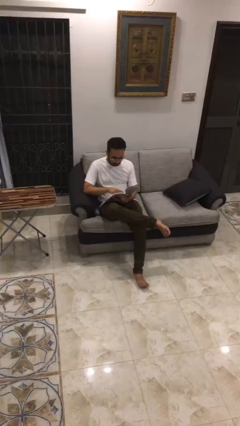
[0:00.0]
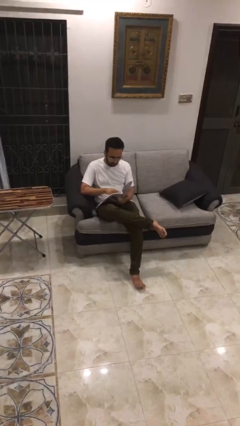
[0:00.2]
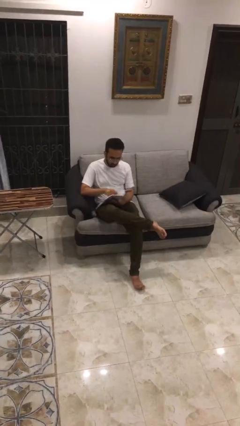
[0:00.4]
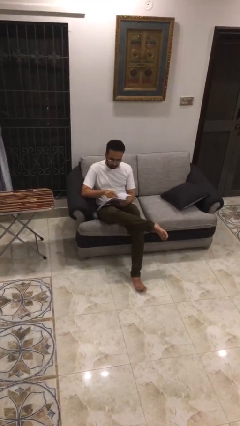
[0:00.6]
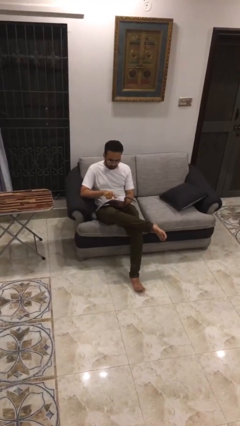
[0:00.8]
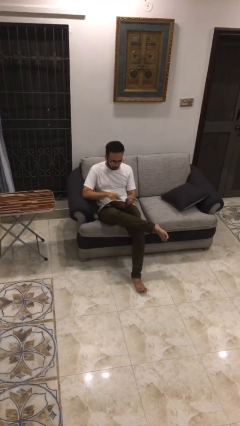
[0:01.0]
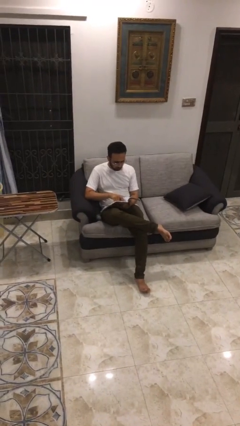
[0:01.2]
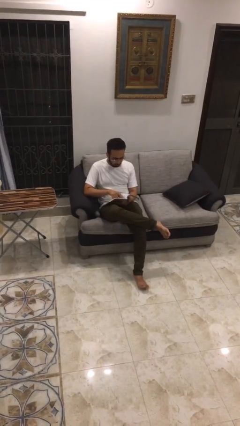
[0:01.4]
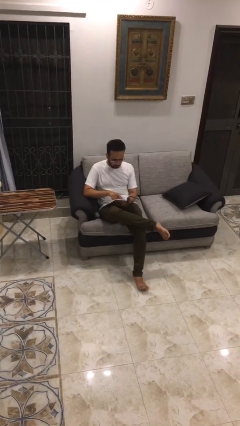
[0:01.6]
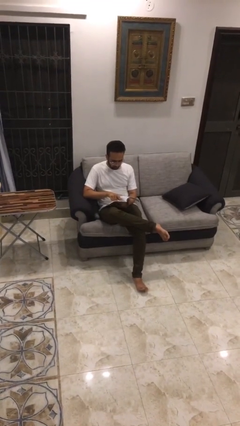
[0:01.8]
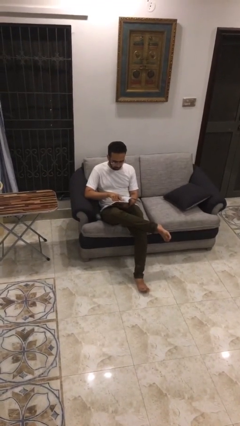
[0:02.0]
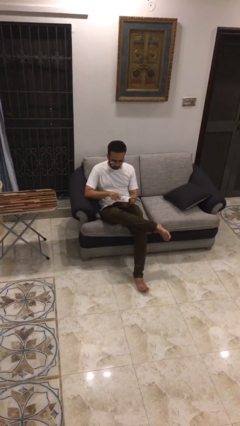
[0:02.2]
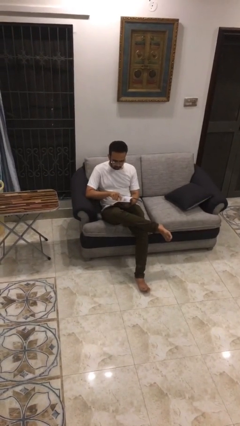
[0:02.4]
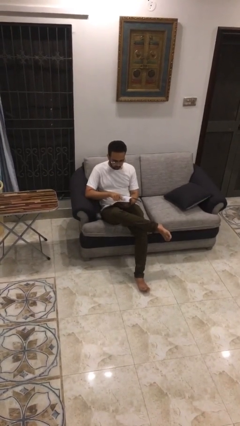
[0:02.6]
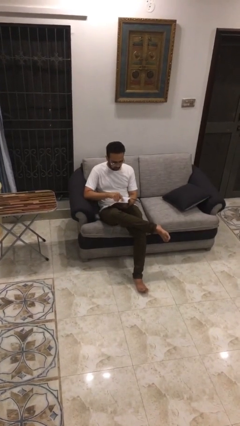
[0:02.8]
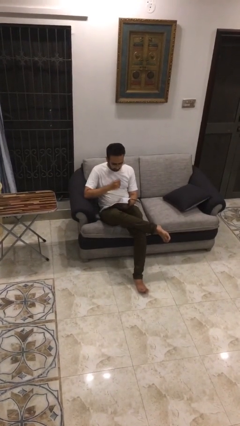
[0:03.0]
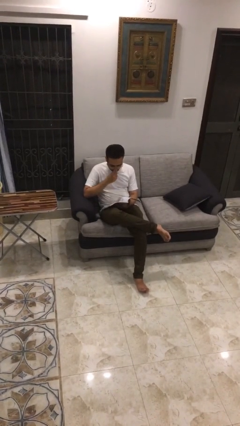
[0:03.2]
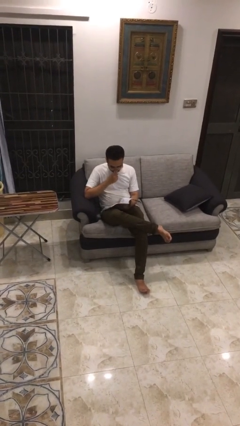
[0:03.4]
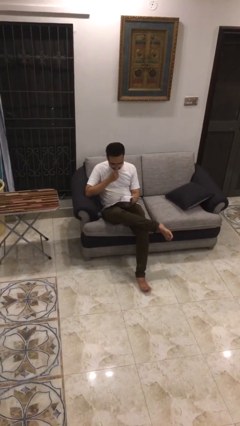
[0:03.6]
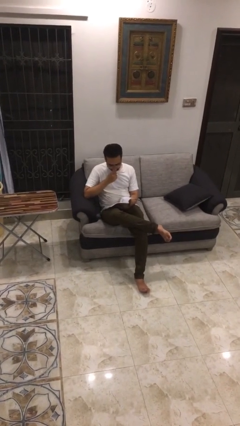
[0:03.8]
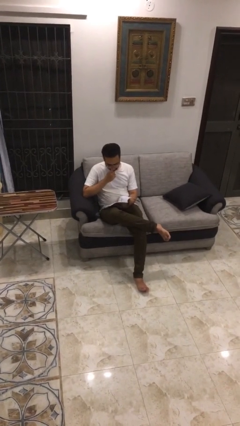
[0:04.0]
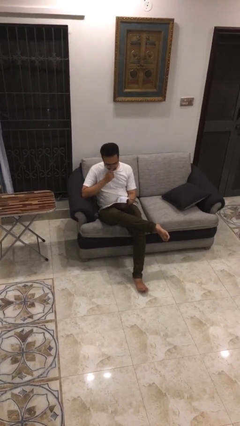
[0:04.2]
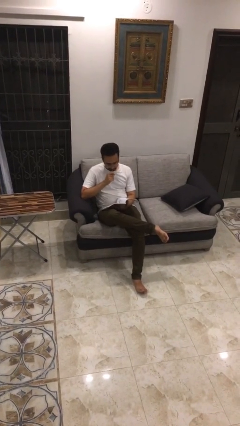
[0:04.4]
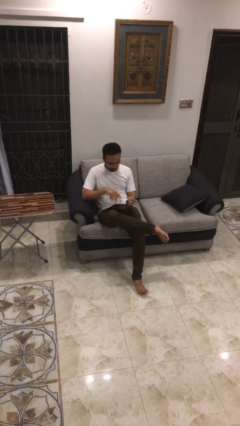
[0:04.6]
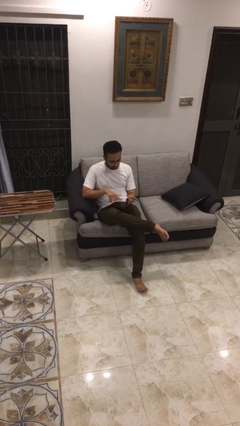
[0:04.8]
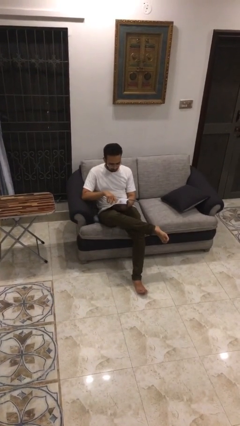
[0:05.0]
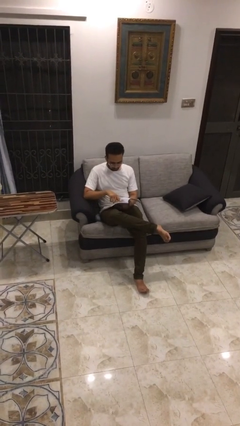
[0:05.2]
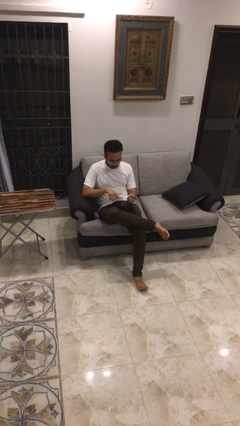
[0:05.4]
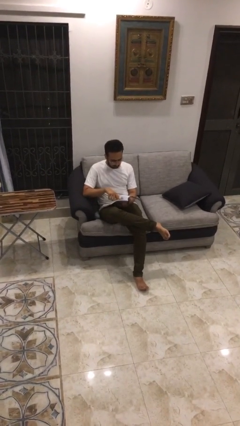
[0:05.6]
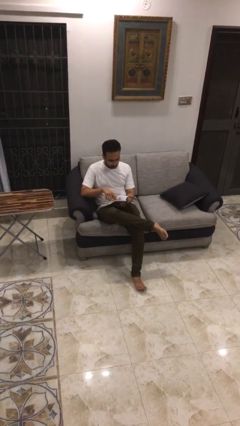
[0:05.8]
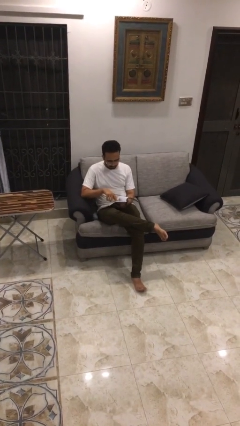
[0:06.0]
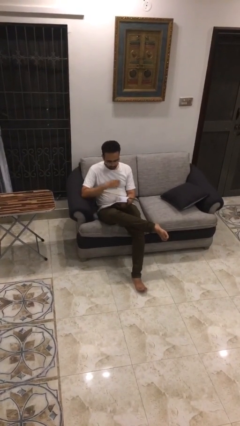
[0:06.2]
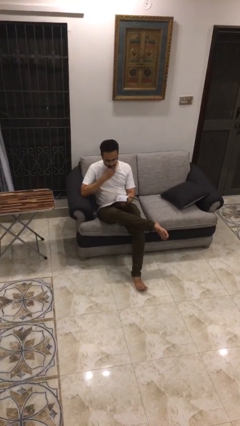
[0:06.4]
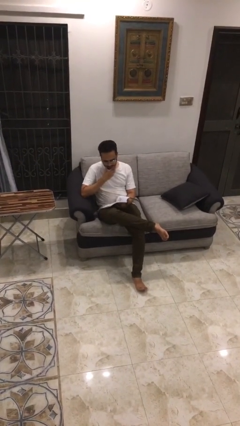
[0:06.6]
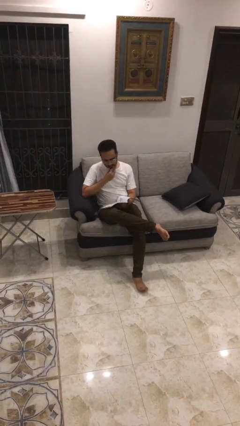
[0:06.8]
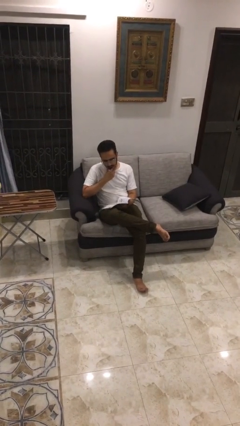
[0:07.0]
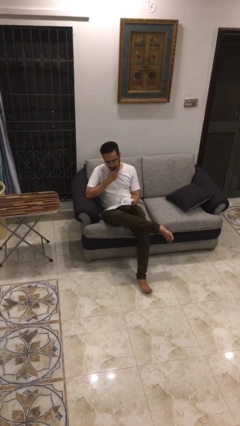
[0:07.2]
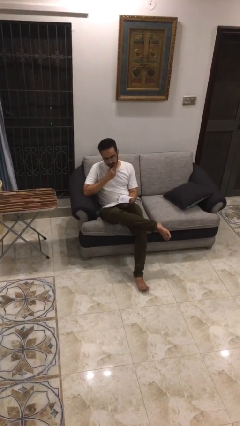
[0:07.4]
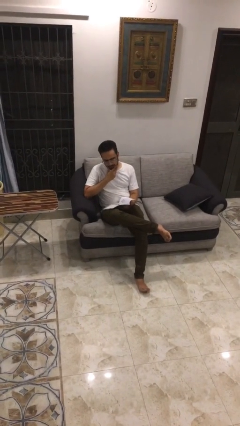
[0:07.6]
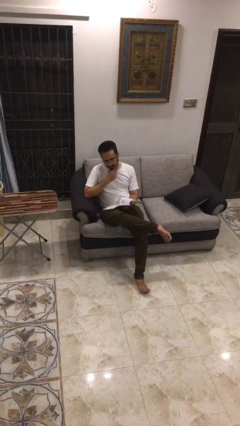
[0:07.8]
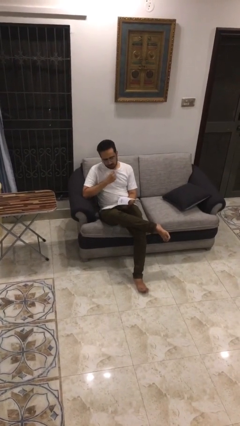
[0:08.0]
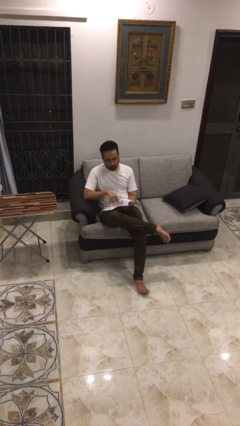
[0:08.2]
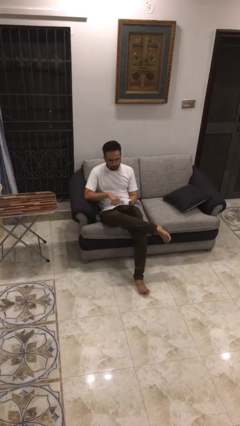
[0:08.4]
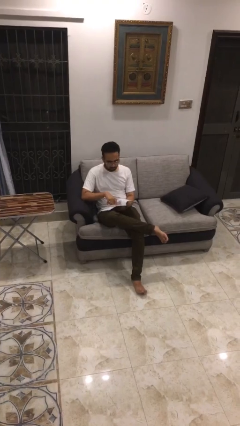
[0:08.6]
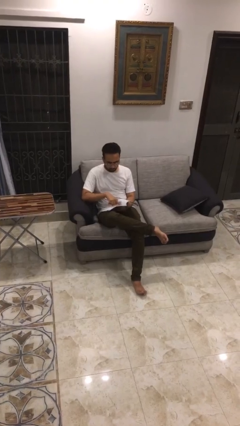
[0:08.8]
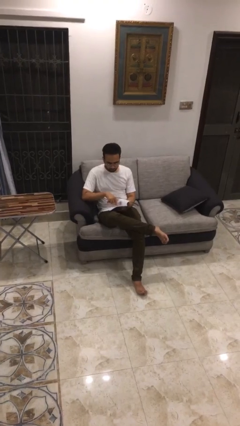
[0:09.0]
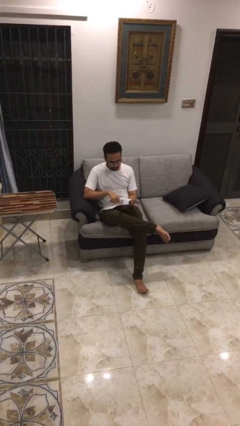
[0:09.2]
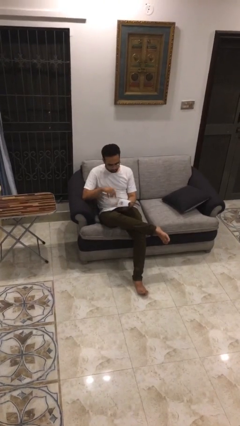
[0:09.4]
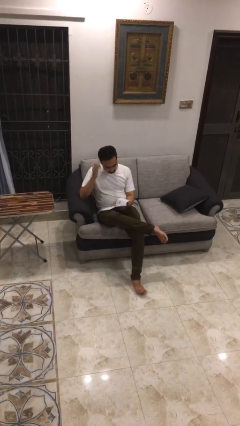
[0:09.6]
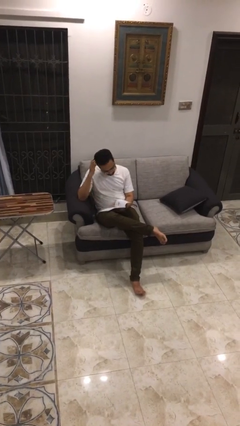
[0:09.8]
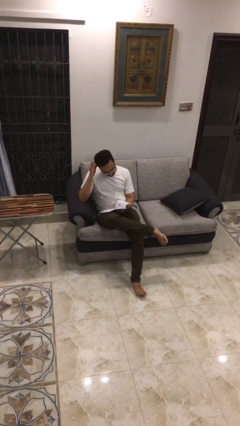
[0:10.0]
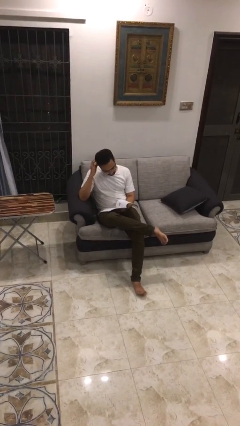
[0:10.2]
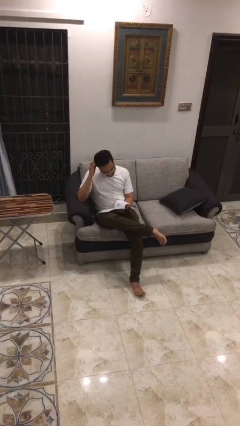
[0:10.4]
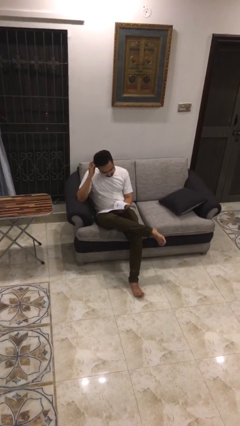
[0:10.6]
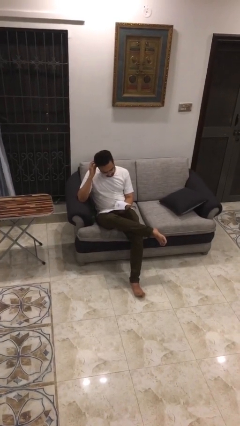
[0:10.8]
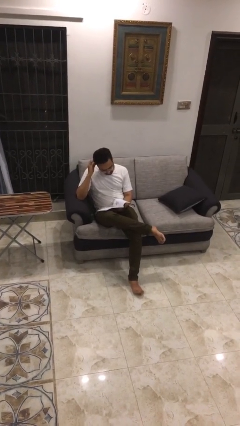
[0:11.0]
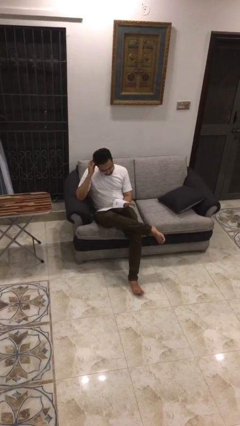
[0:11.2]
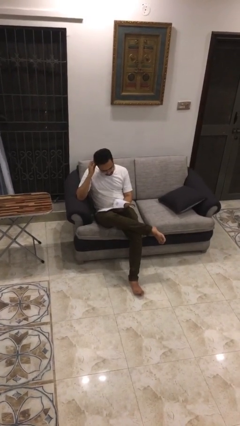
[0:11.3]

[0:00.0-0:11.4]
person reads document

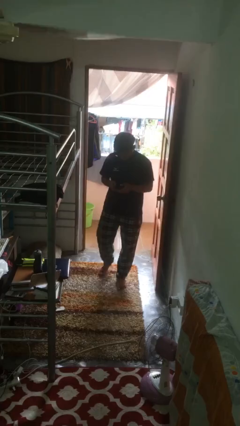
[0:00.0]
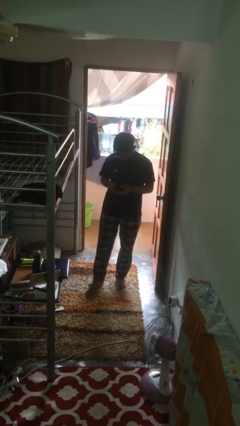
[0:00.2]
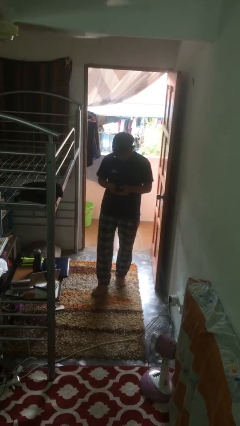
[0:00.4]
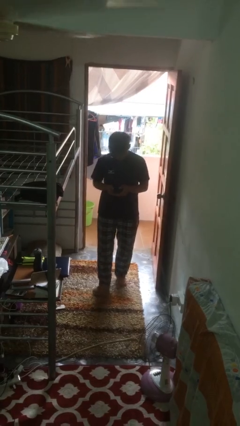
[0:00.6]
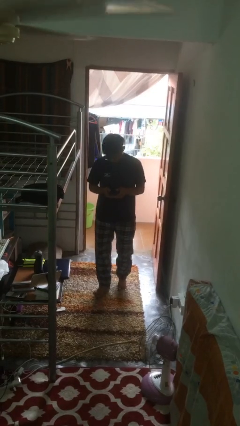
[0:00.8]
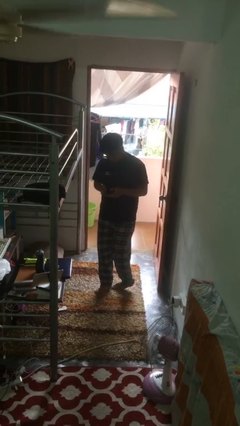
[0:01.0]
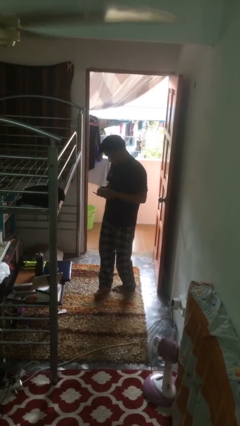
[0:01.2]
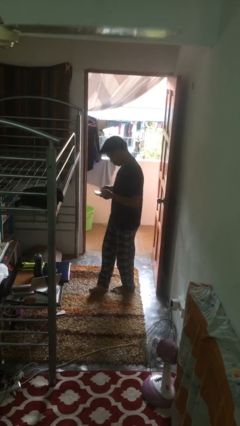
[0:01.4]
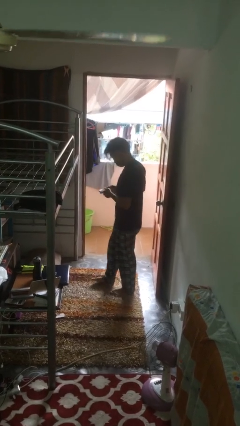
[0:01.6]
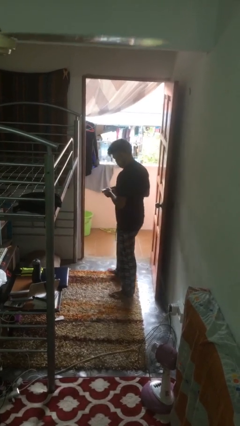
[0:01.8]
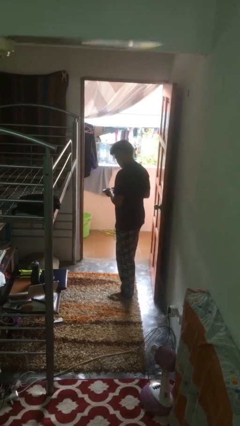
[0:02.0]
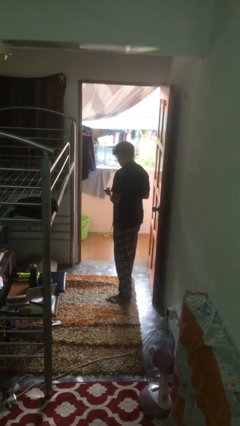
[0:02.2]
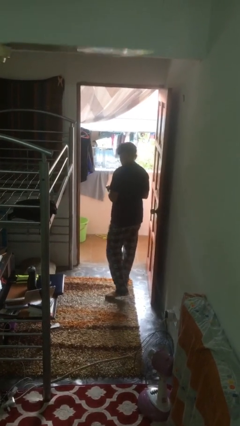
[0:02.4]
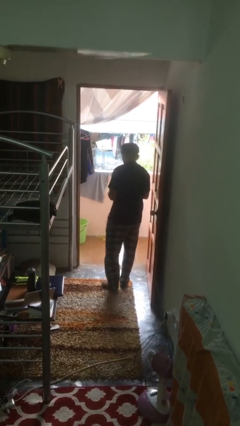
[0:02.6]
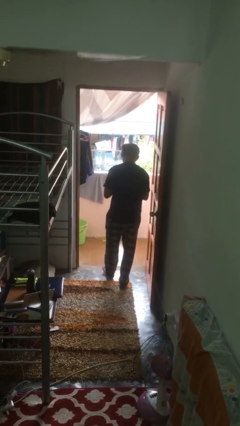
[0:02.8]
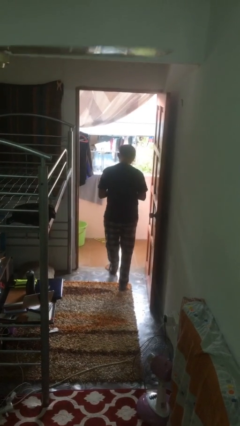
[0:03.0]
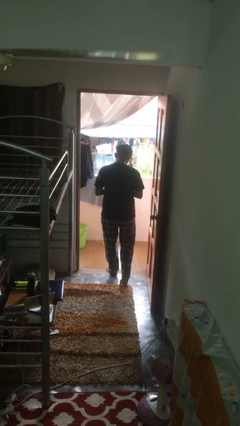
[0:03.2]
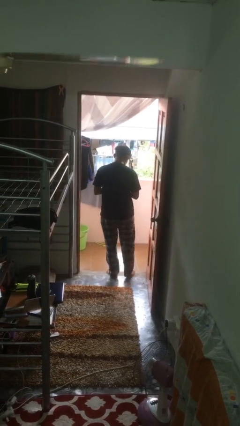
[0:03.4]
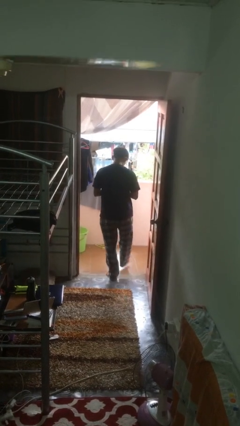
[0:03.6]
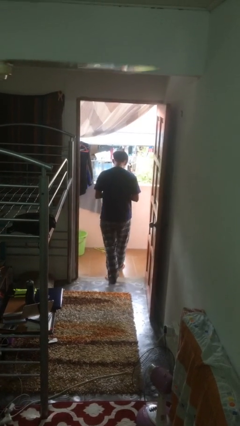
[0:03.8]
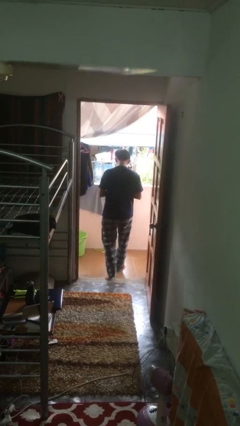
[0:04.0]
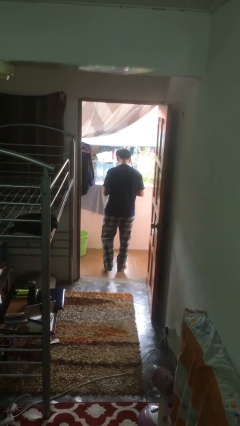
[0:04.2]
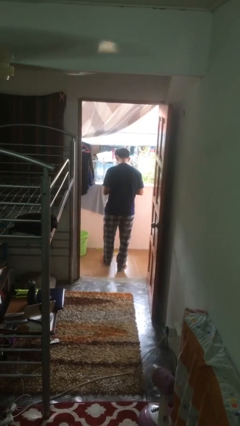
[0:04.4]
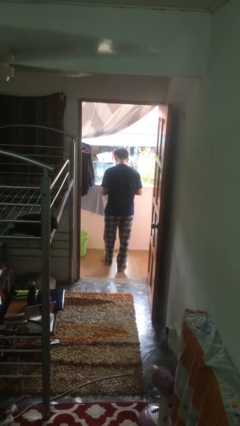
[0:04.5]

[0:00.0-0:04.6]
person exits scene through structure

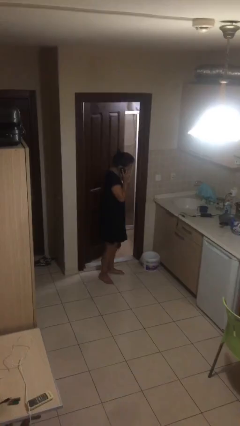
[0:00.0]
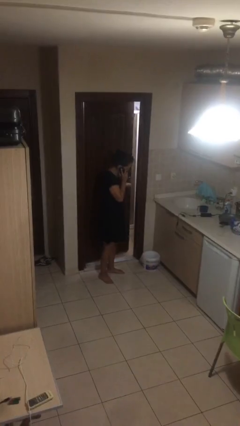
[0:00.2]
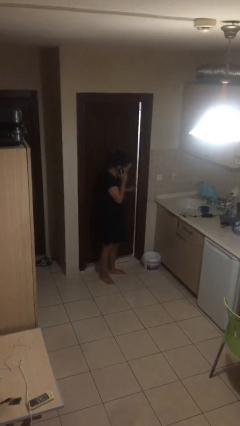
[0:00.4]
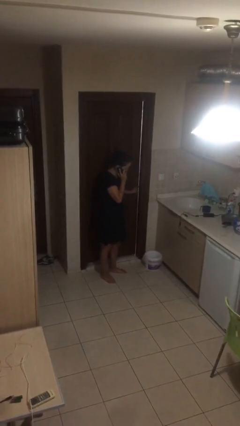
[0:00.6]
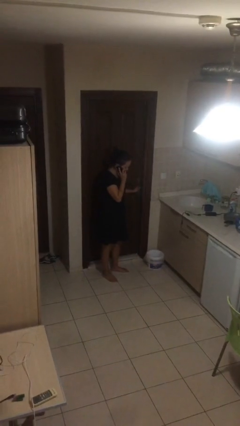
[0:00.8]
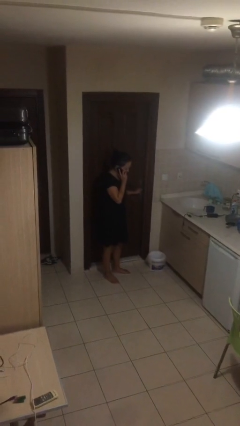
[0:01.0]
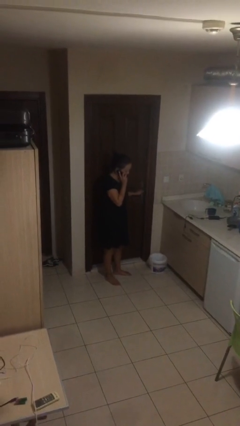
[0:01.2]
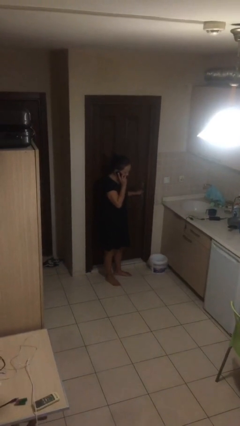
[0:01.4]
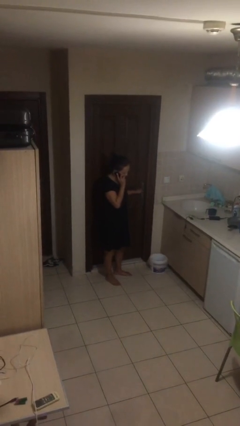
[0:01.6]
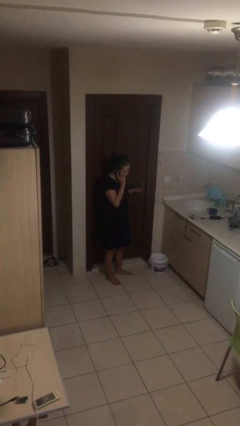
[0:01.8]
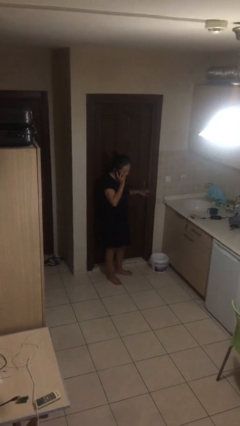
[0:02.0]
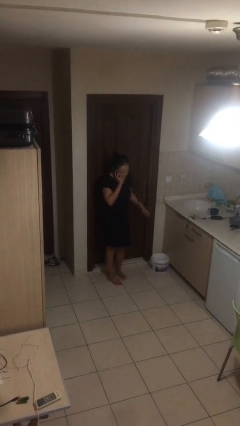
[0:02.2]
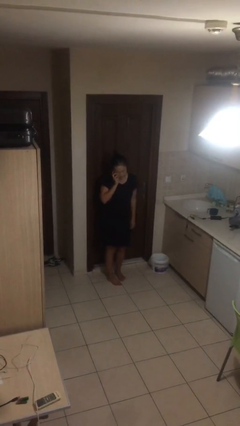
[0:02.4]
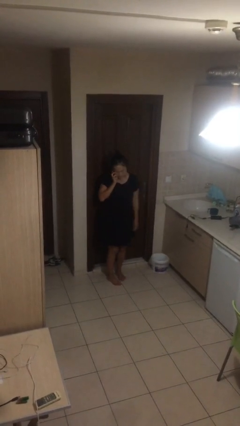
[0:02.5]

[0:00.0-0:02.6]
person closes facility door
